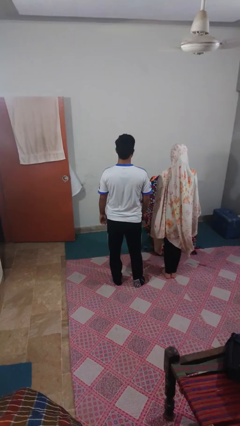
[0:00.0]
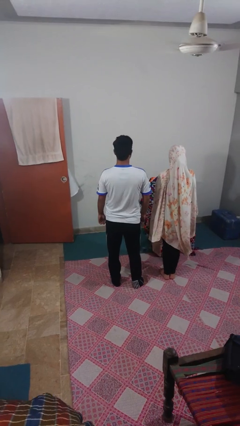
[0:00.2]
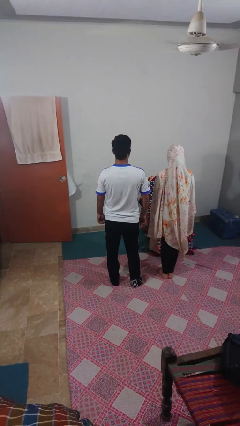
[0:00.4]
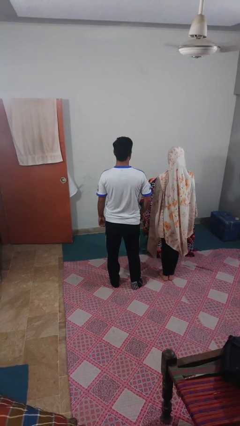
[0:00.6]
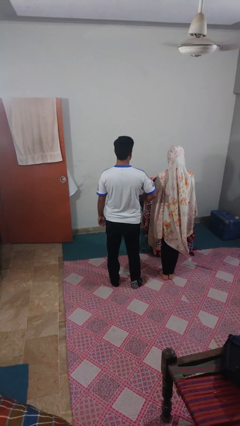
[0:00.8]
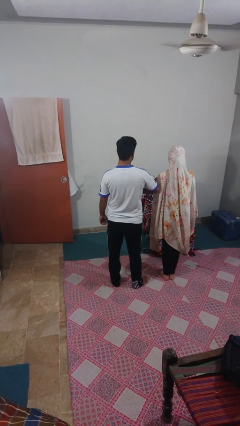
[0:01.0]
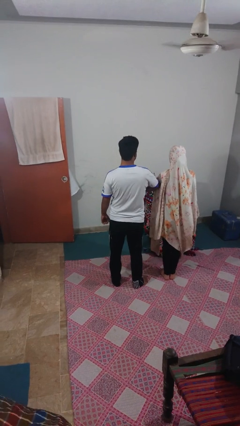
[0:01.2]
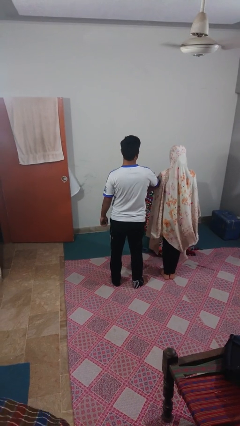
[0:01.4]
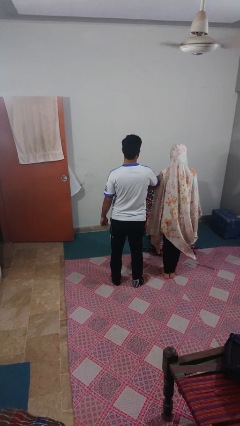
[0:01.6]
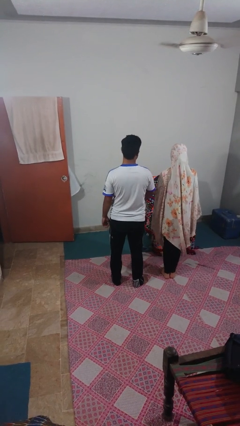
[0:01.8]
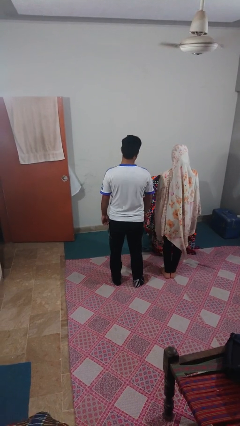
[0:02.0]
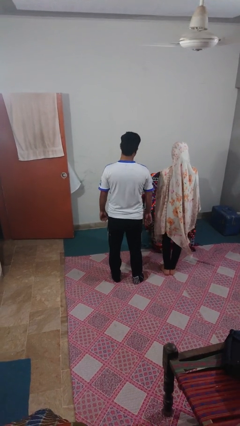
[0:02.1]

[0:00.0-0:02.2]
person nudges person with elbow

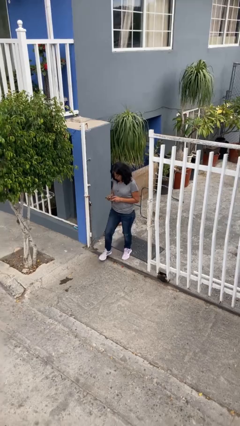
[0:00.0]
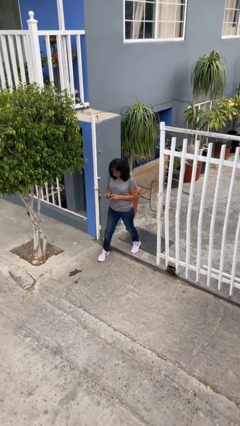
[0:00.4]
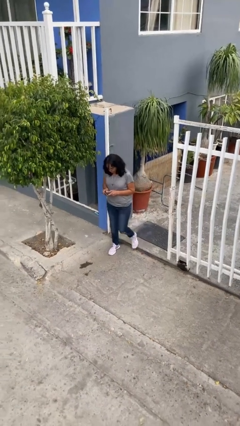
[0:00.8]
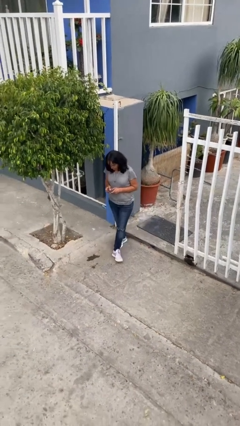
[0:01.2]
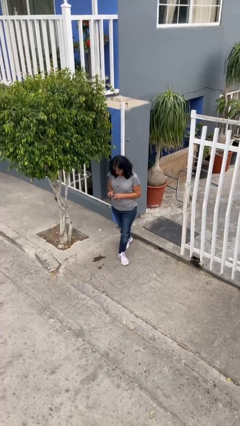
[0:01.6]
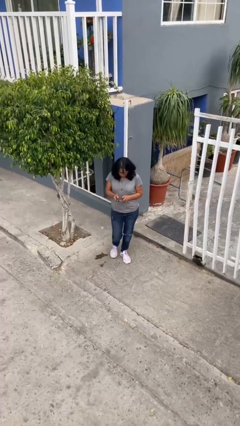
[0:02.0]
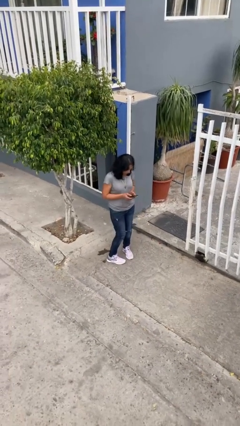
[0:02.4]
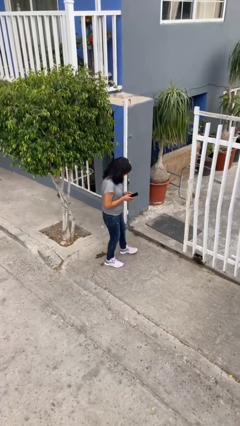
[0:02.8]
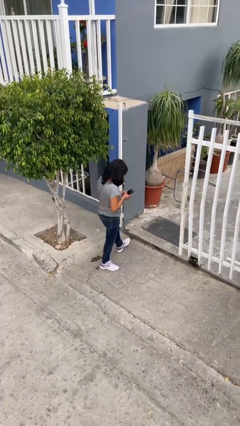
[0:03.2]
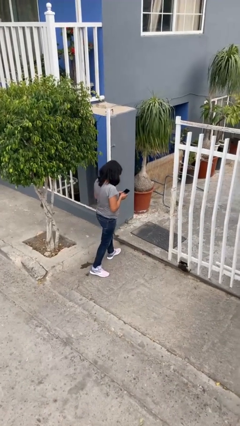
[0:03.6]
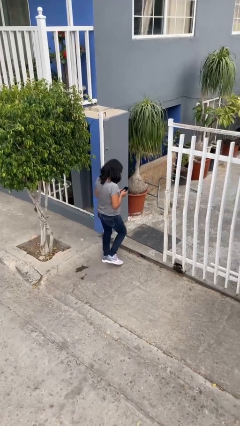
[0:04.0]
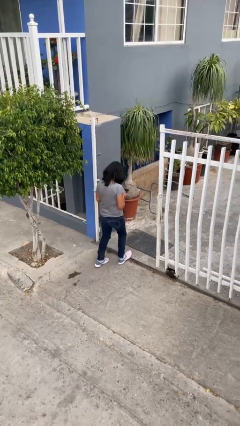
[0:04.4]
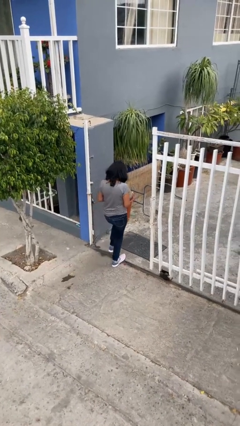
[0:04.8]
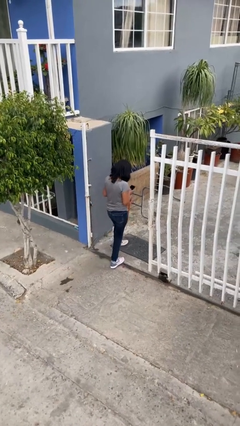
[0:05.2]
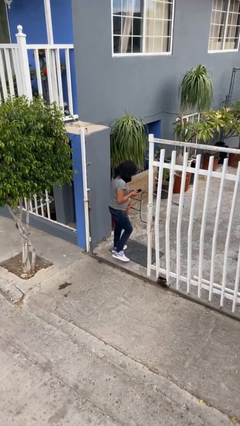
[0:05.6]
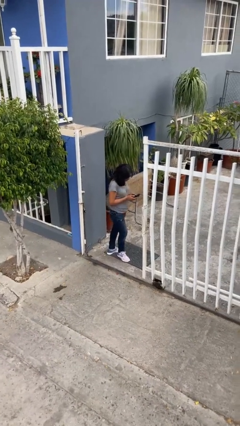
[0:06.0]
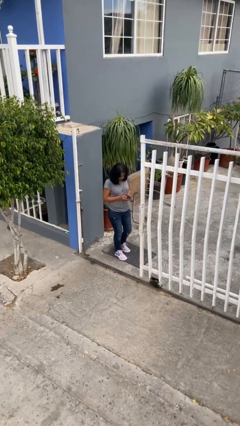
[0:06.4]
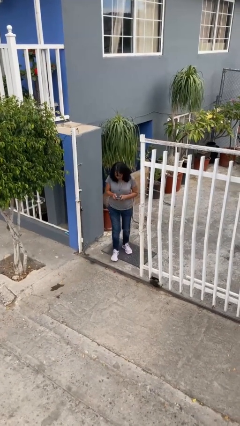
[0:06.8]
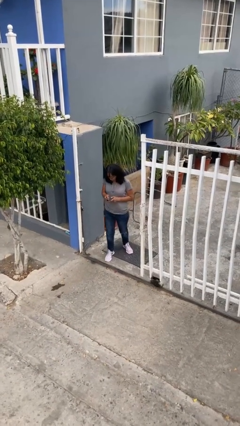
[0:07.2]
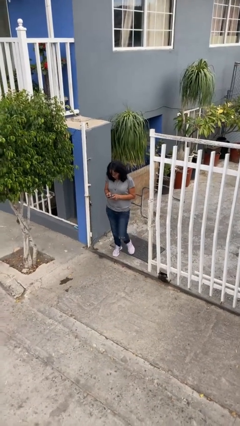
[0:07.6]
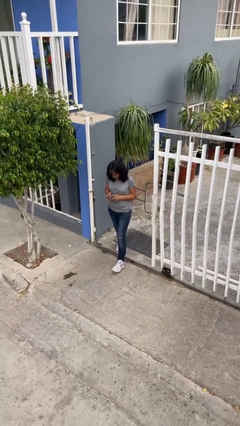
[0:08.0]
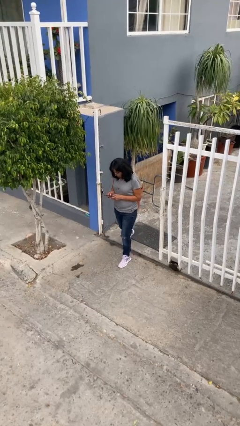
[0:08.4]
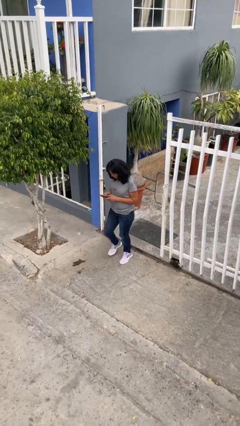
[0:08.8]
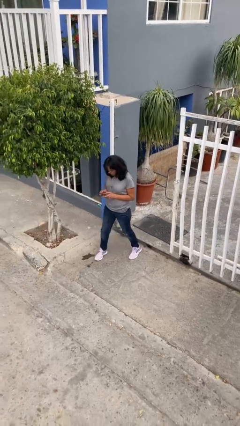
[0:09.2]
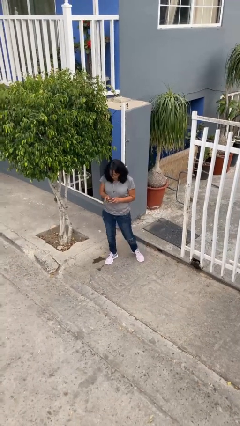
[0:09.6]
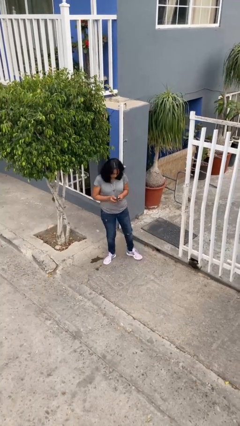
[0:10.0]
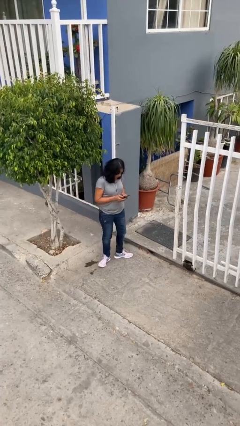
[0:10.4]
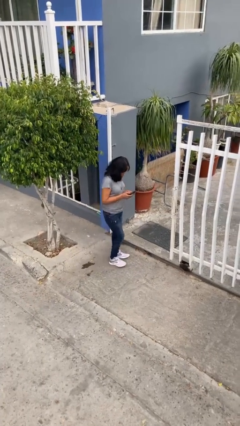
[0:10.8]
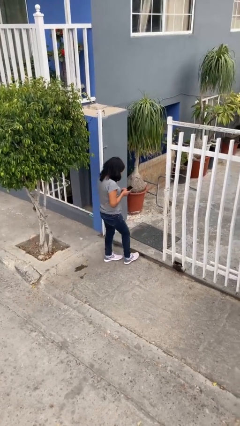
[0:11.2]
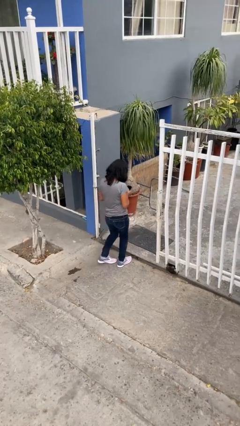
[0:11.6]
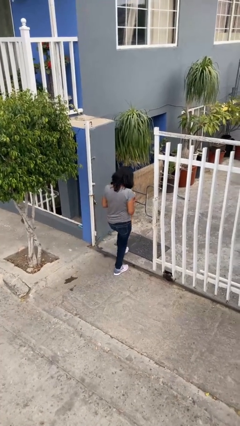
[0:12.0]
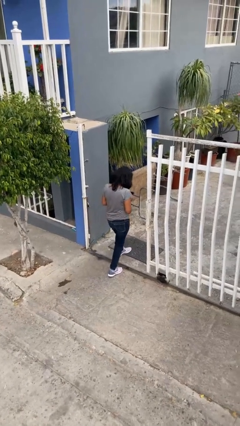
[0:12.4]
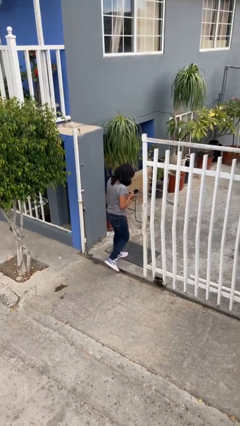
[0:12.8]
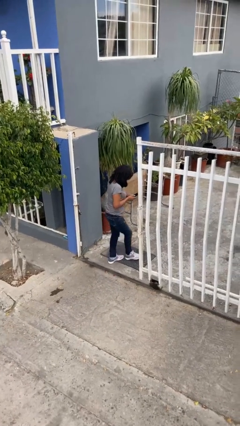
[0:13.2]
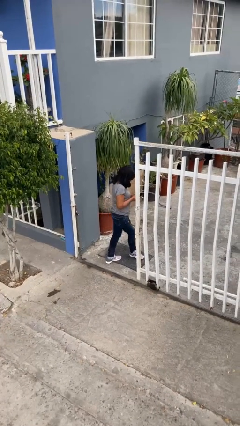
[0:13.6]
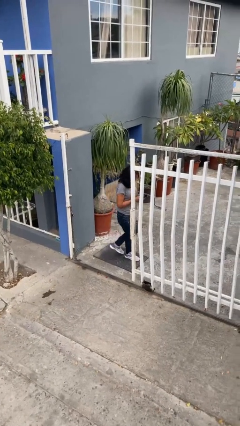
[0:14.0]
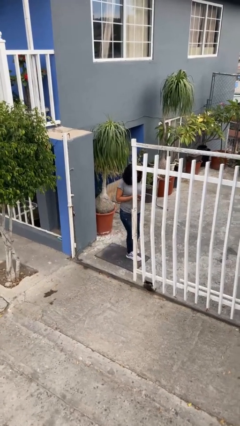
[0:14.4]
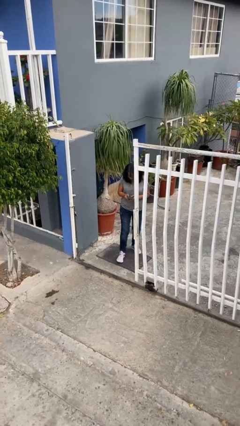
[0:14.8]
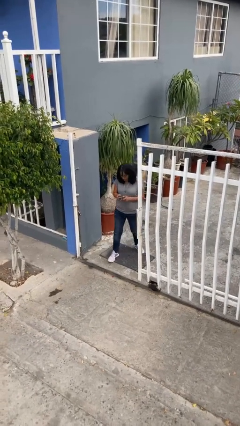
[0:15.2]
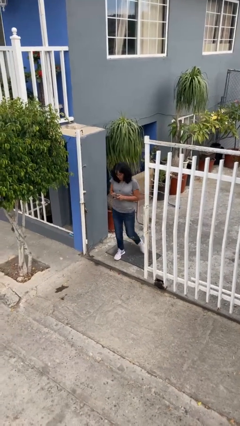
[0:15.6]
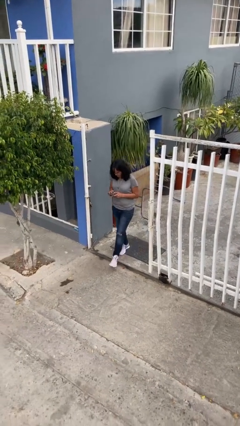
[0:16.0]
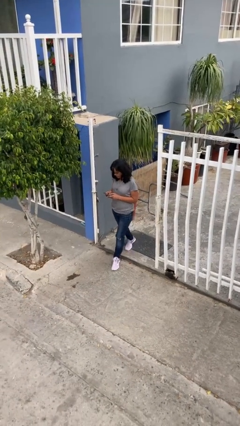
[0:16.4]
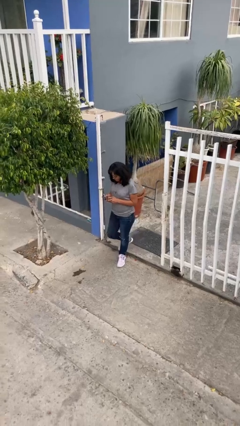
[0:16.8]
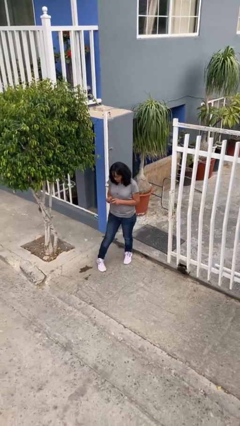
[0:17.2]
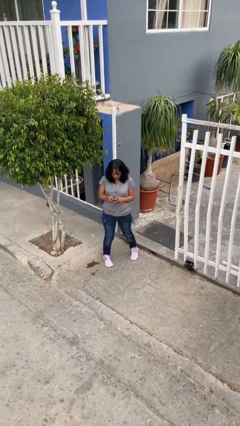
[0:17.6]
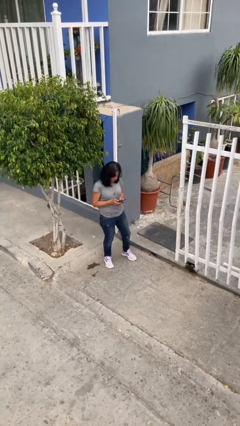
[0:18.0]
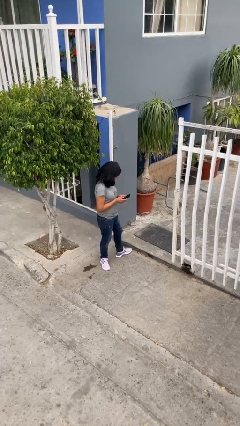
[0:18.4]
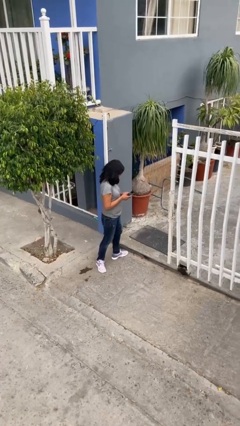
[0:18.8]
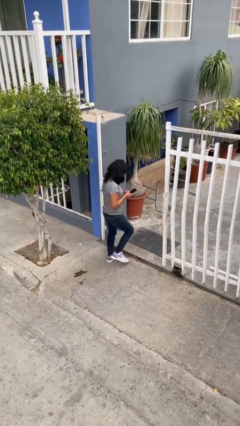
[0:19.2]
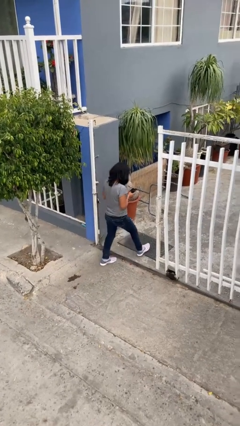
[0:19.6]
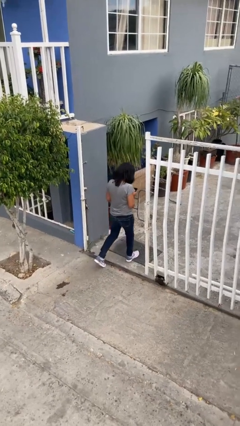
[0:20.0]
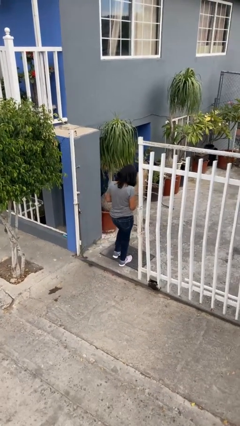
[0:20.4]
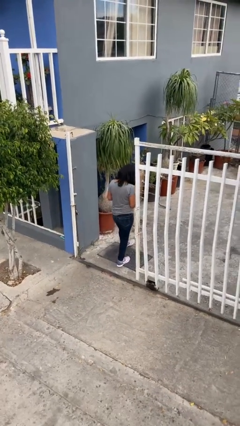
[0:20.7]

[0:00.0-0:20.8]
person texts on phone

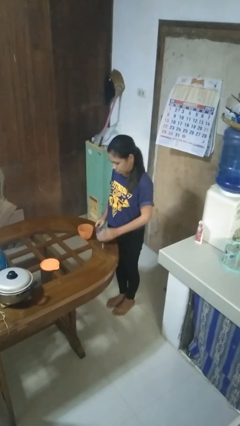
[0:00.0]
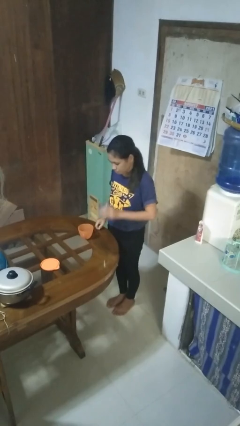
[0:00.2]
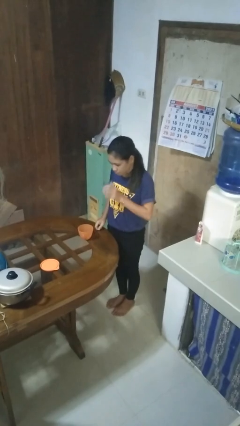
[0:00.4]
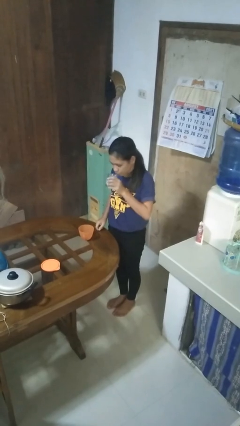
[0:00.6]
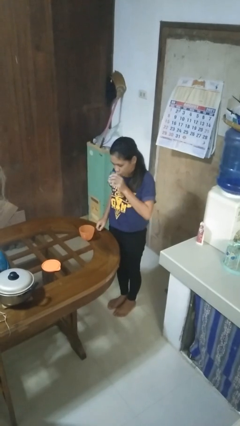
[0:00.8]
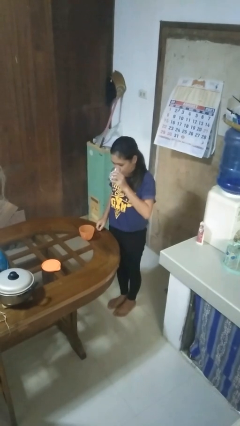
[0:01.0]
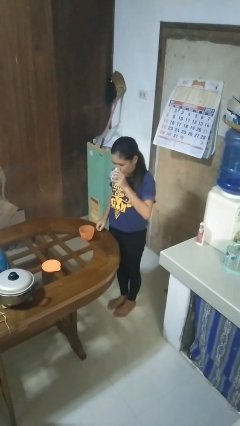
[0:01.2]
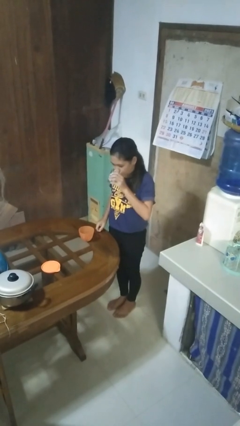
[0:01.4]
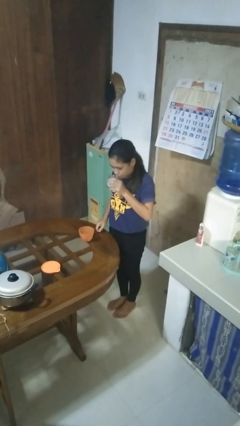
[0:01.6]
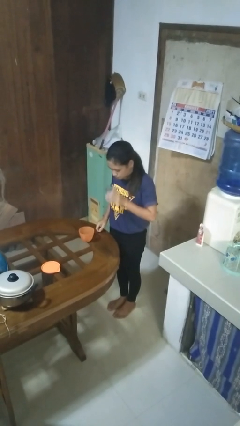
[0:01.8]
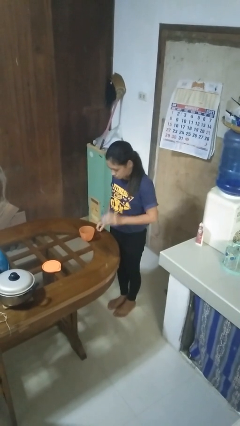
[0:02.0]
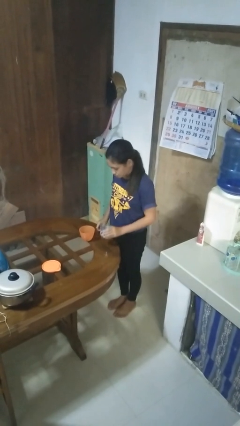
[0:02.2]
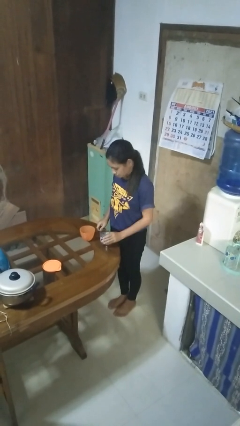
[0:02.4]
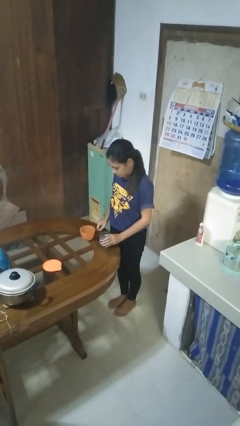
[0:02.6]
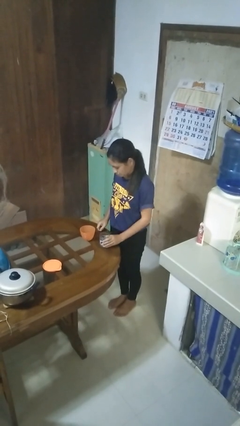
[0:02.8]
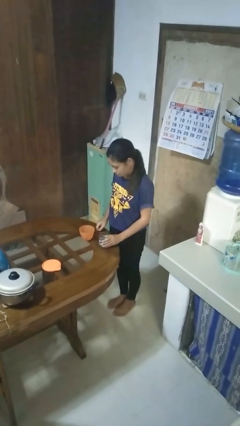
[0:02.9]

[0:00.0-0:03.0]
person drinks from cup

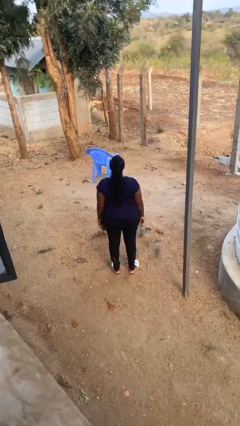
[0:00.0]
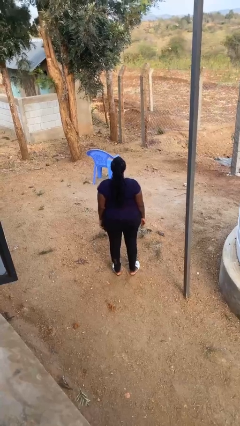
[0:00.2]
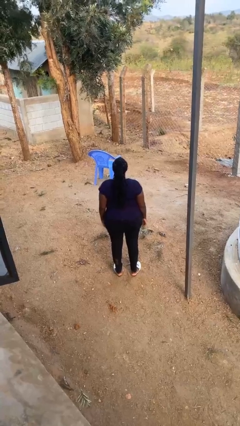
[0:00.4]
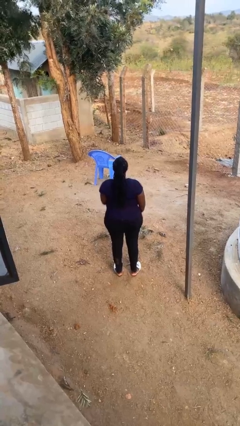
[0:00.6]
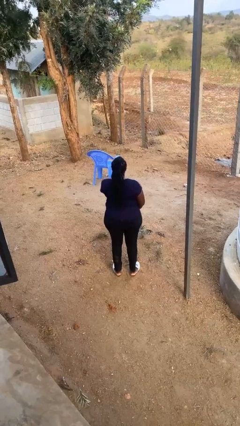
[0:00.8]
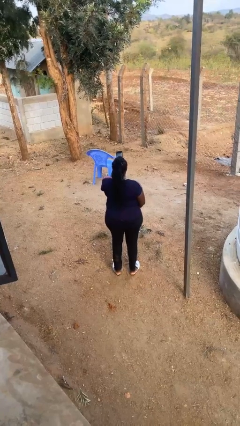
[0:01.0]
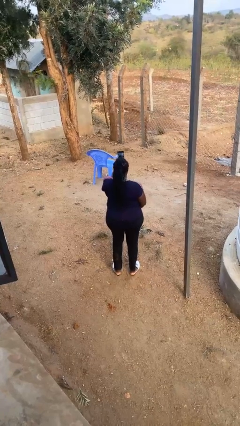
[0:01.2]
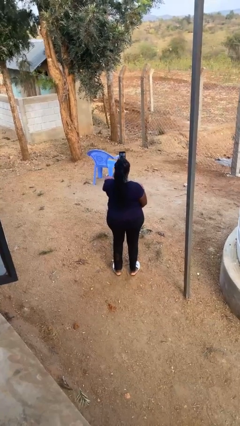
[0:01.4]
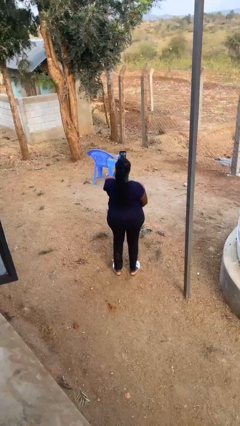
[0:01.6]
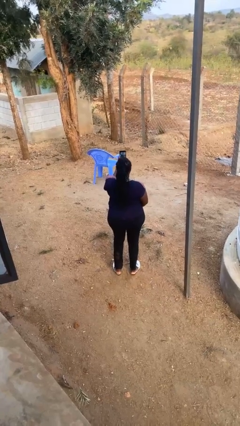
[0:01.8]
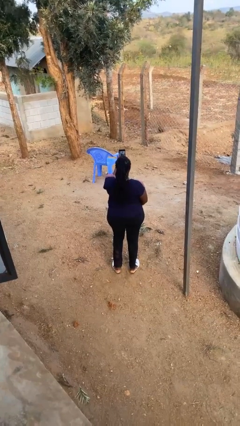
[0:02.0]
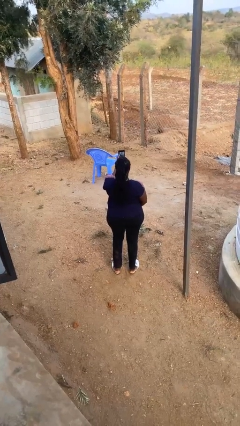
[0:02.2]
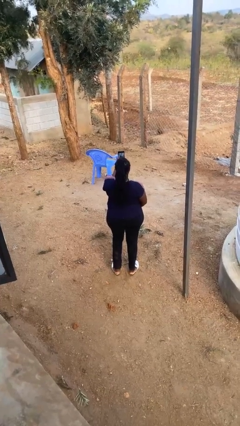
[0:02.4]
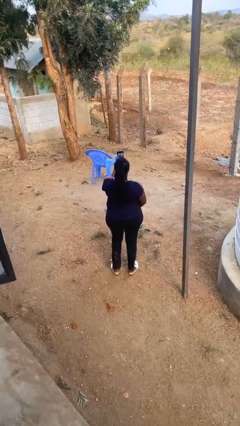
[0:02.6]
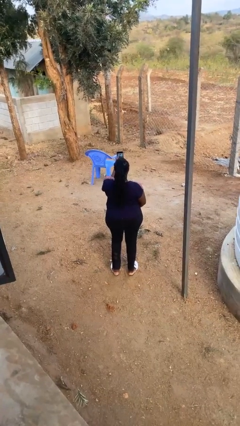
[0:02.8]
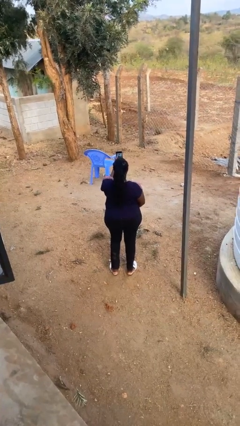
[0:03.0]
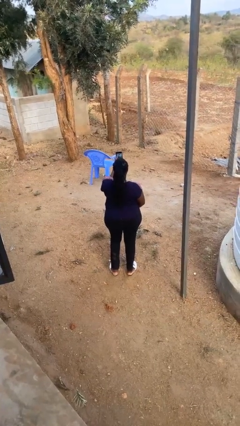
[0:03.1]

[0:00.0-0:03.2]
person takes selfie
